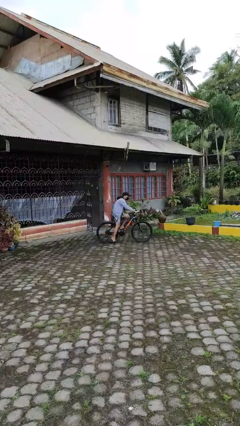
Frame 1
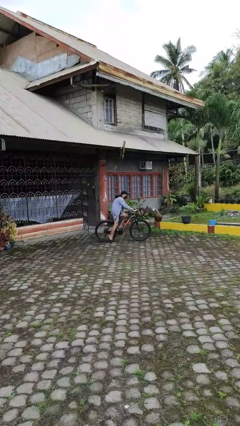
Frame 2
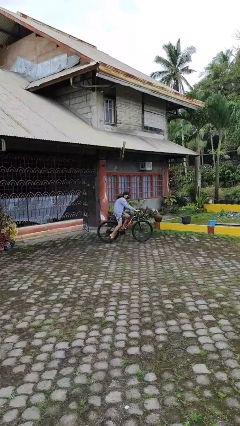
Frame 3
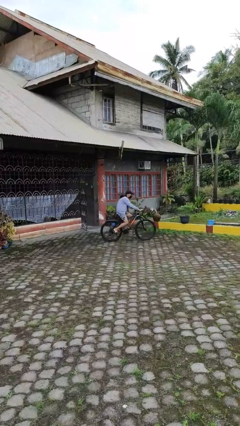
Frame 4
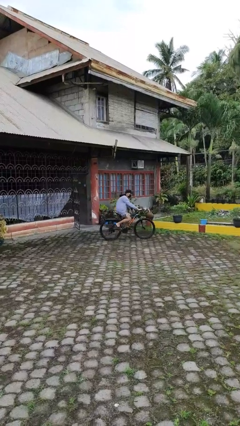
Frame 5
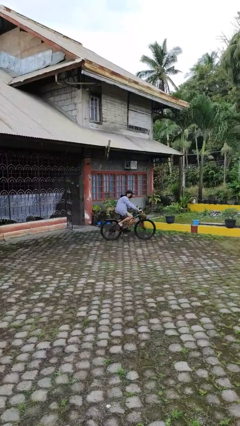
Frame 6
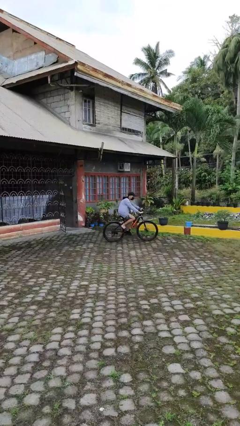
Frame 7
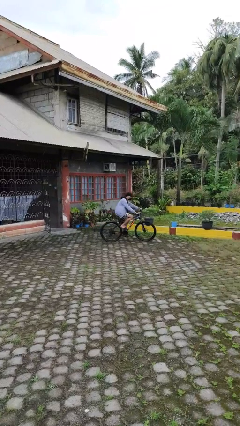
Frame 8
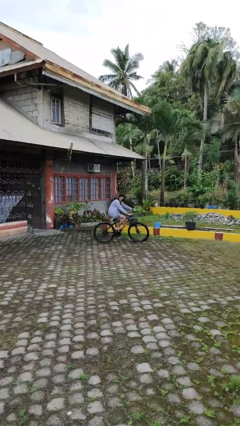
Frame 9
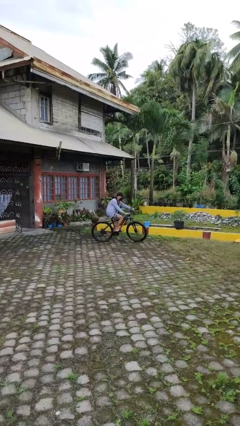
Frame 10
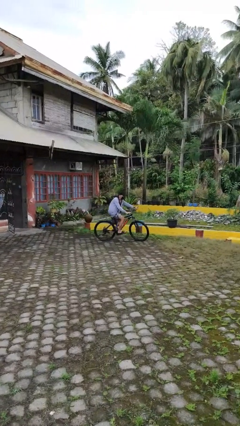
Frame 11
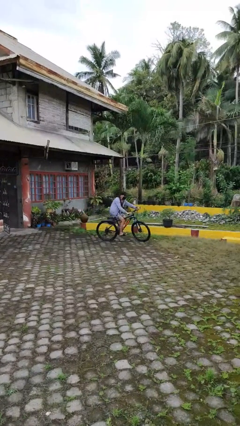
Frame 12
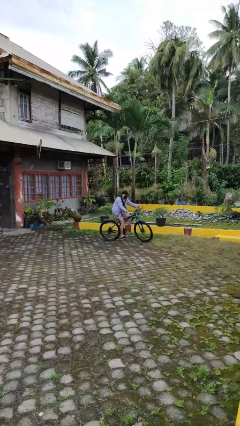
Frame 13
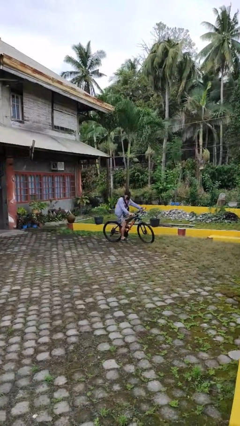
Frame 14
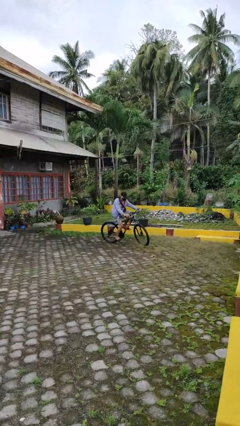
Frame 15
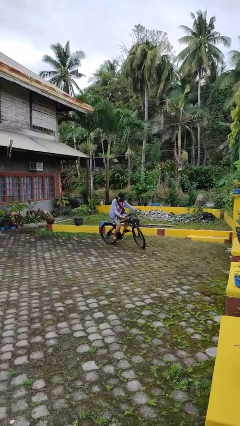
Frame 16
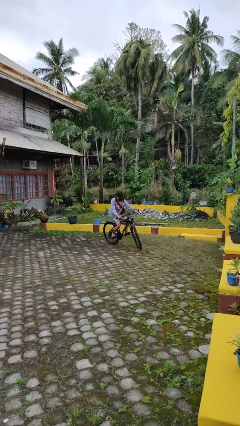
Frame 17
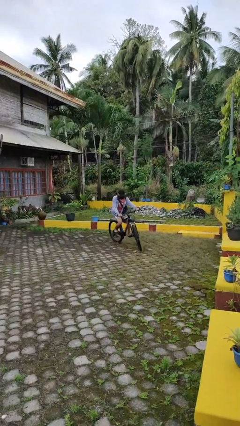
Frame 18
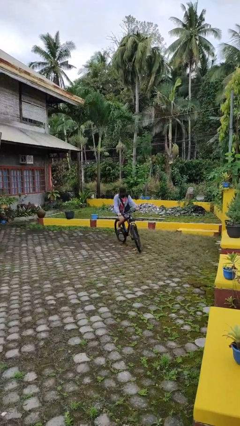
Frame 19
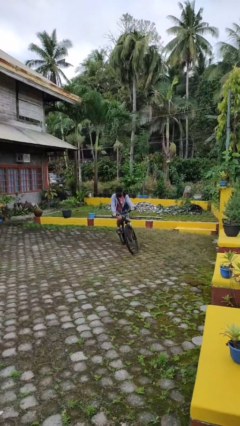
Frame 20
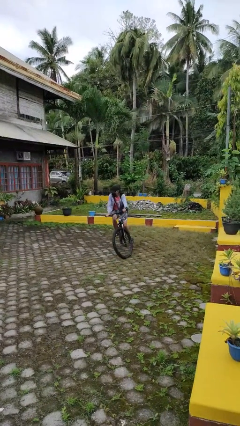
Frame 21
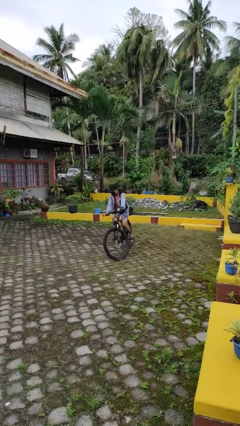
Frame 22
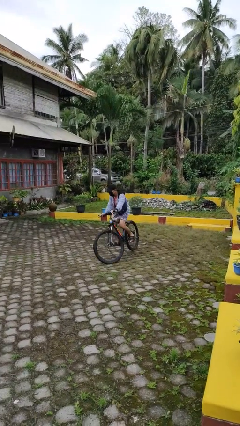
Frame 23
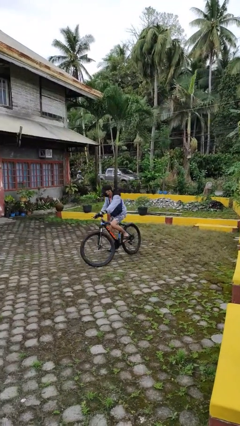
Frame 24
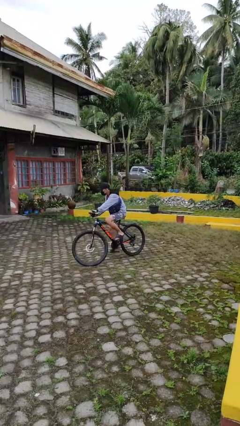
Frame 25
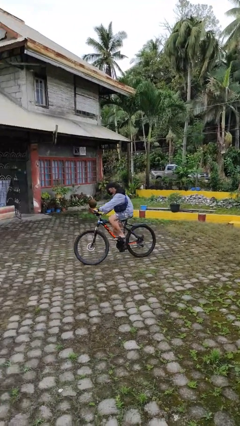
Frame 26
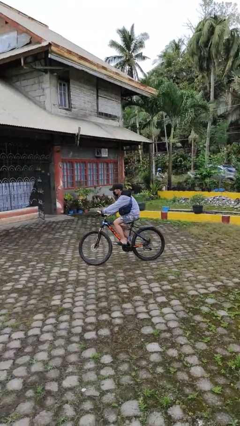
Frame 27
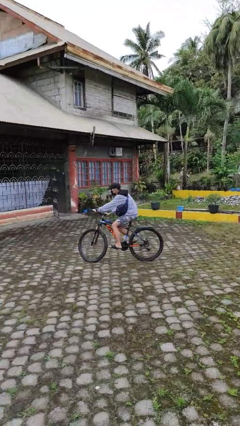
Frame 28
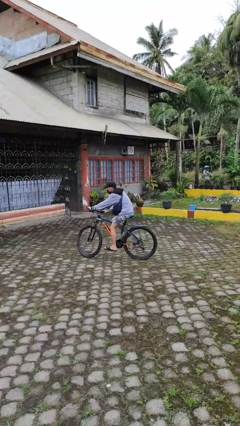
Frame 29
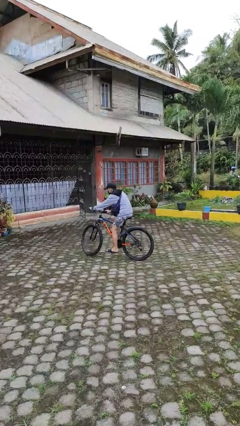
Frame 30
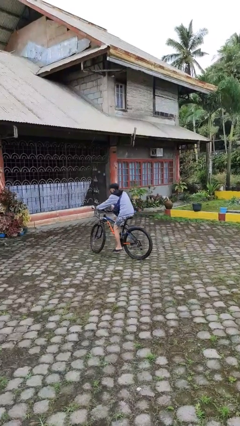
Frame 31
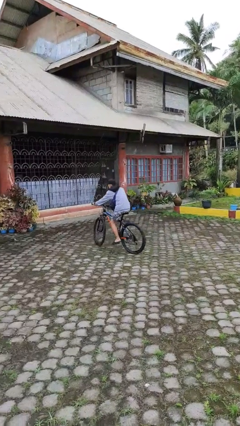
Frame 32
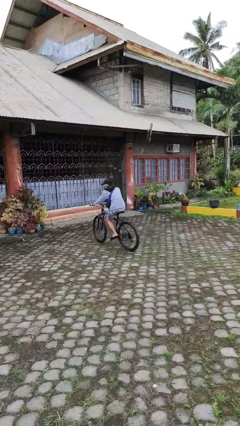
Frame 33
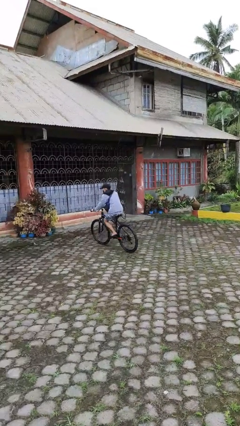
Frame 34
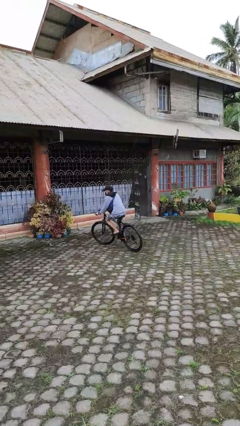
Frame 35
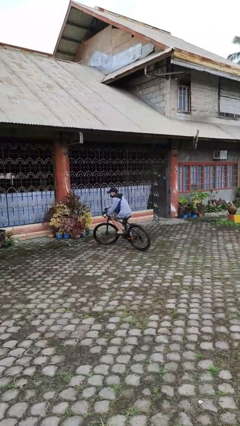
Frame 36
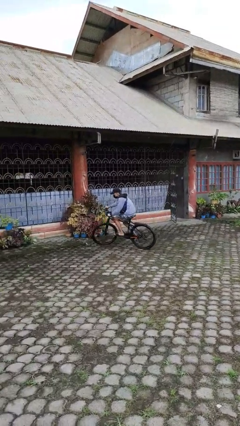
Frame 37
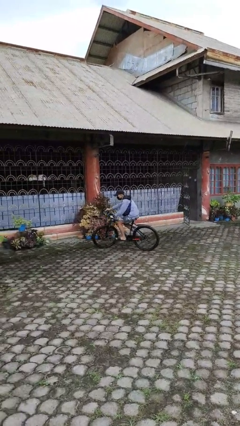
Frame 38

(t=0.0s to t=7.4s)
person rides bicycle

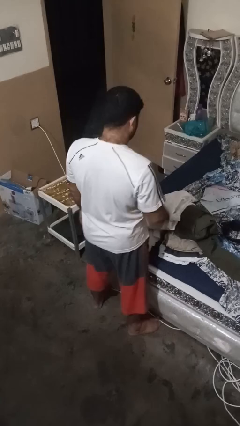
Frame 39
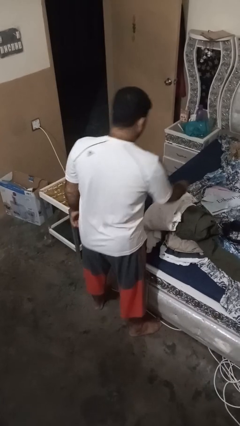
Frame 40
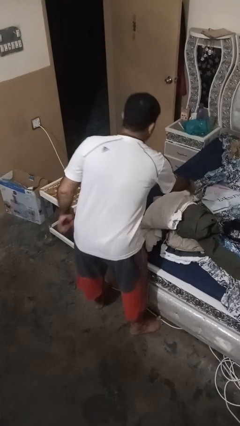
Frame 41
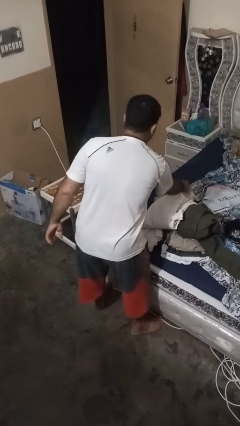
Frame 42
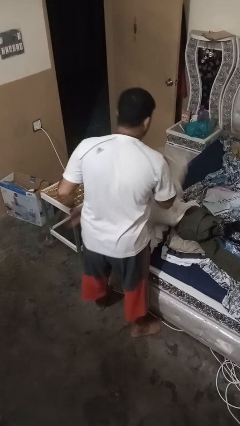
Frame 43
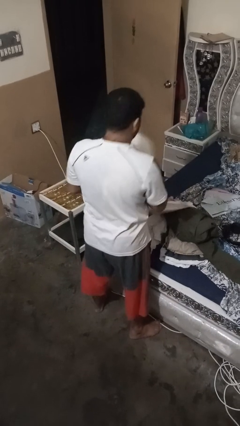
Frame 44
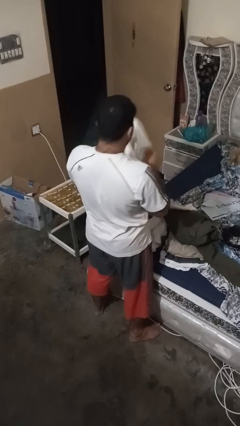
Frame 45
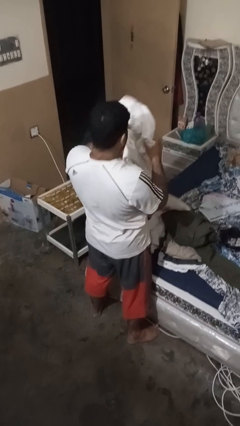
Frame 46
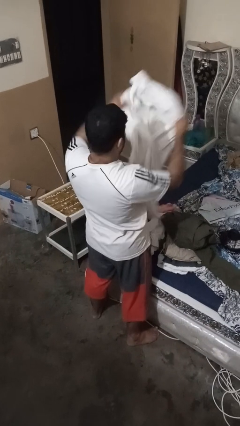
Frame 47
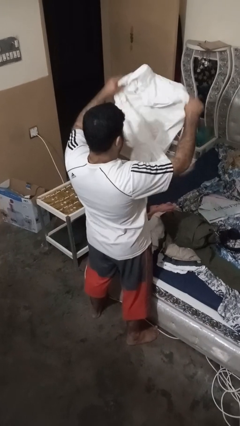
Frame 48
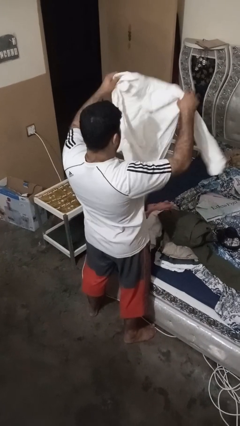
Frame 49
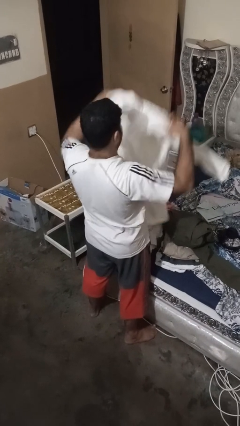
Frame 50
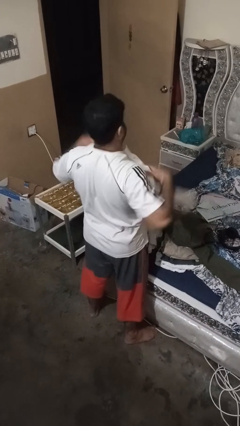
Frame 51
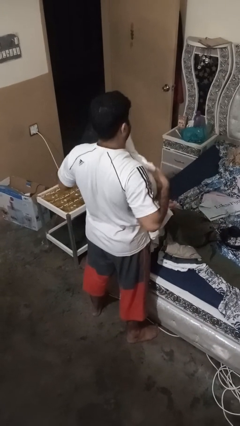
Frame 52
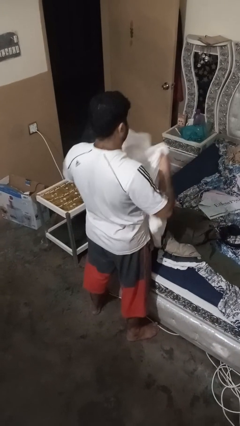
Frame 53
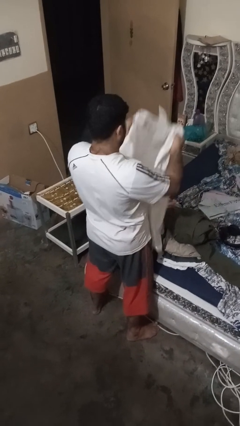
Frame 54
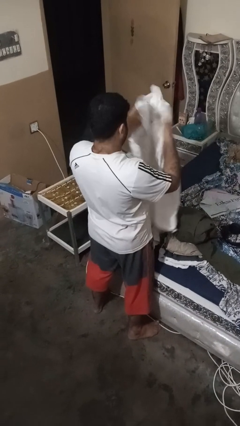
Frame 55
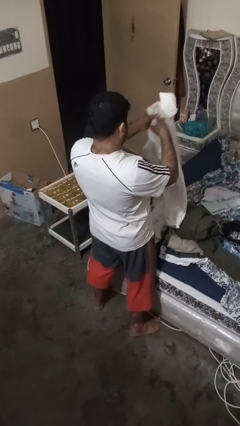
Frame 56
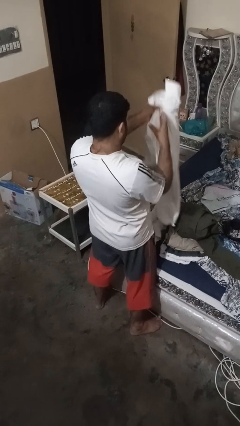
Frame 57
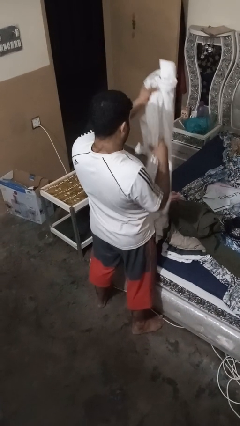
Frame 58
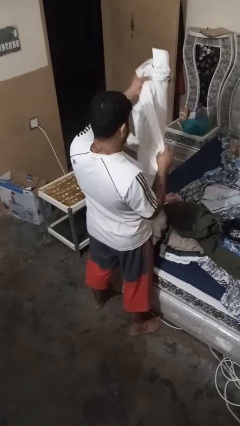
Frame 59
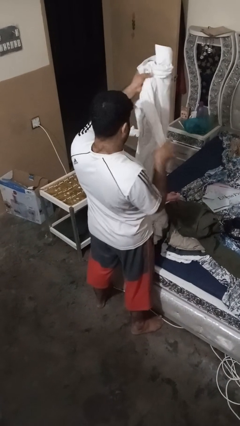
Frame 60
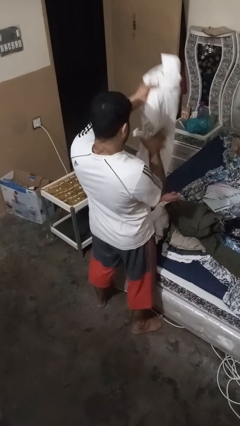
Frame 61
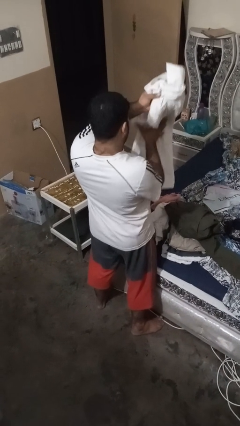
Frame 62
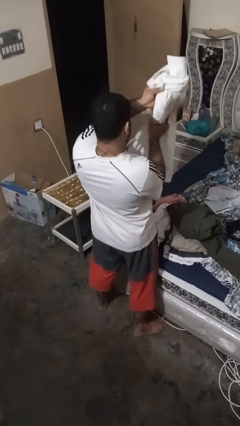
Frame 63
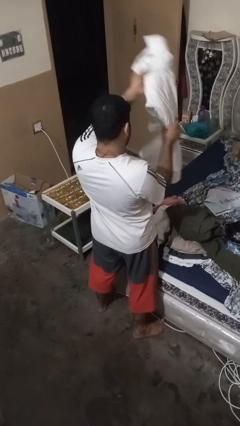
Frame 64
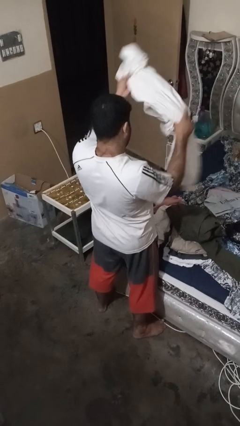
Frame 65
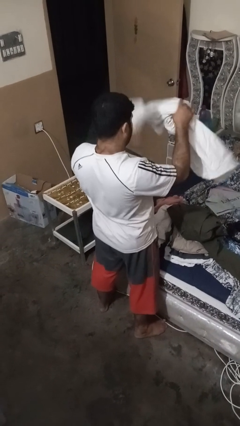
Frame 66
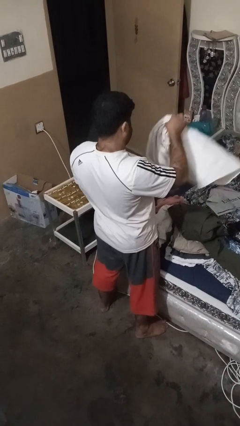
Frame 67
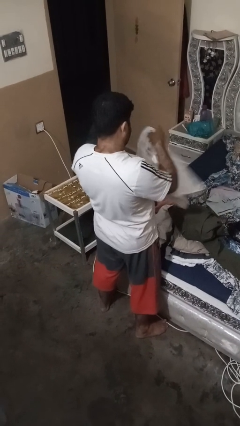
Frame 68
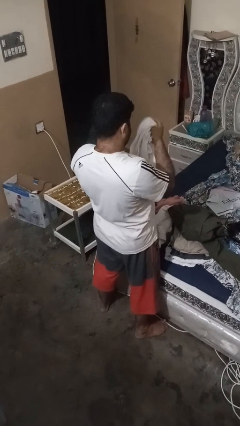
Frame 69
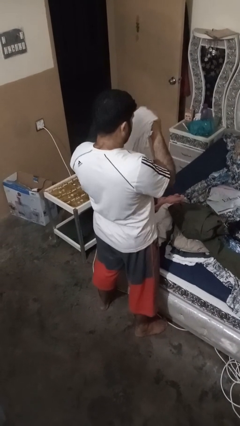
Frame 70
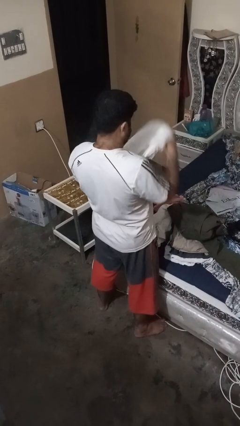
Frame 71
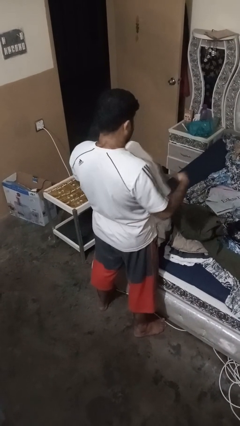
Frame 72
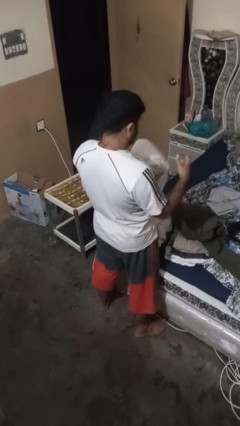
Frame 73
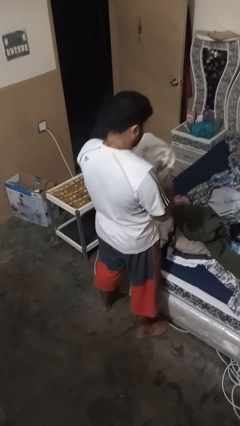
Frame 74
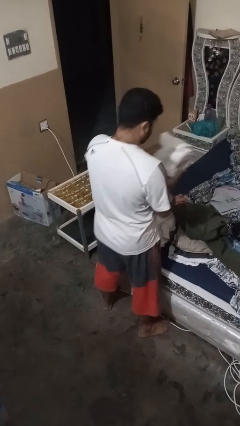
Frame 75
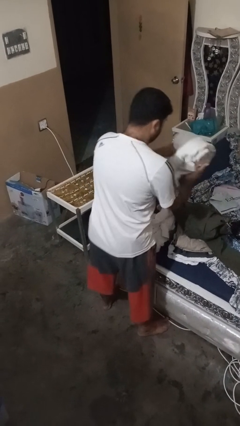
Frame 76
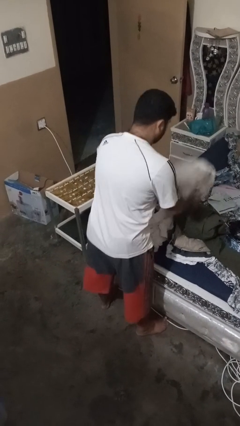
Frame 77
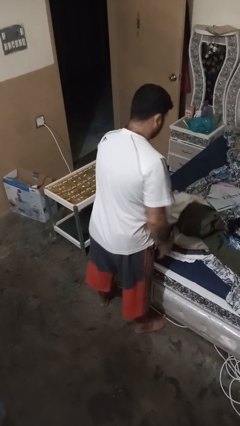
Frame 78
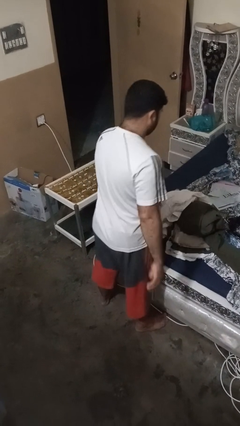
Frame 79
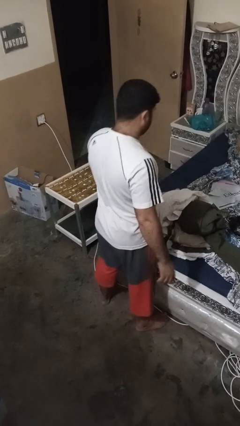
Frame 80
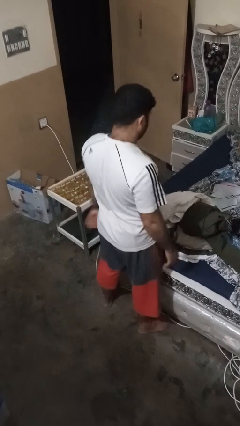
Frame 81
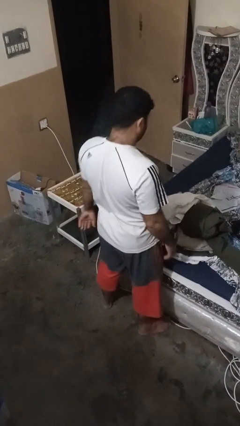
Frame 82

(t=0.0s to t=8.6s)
person folds shirt

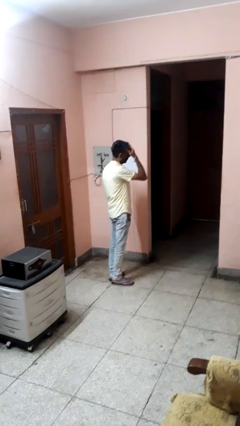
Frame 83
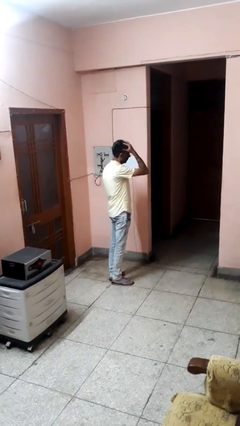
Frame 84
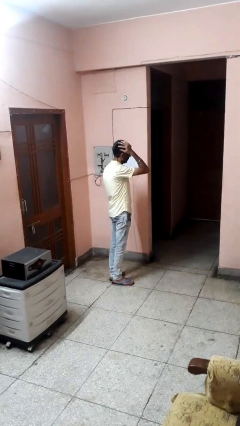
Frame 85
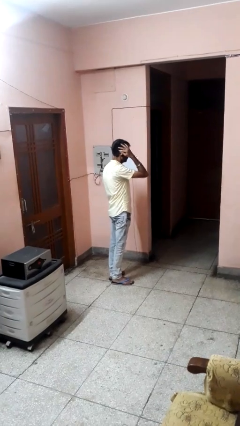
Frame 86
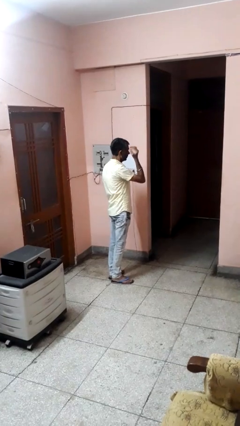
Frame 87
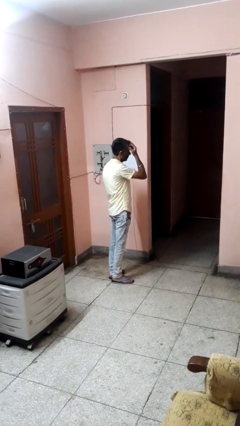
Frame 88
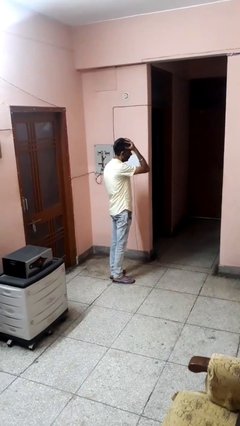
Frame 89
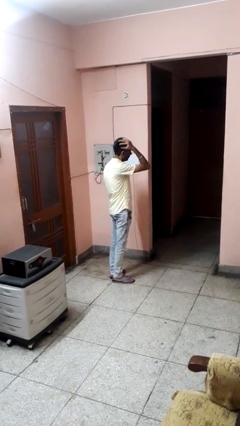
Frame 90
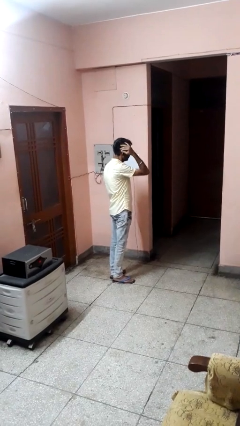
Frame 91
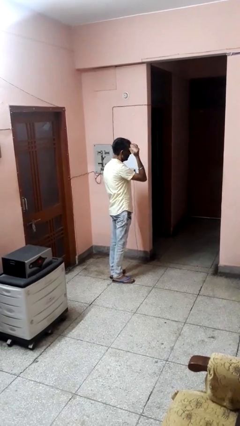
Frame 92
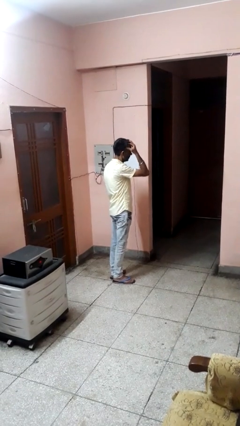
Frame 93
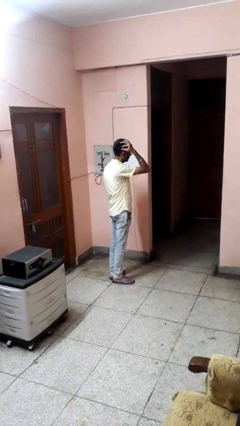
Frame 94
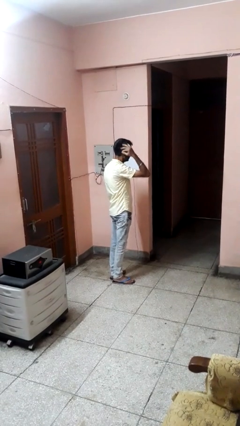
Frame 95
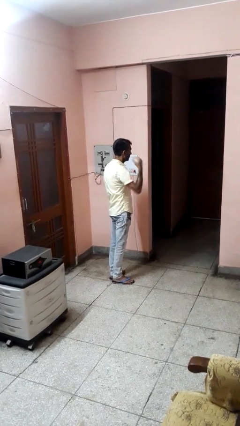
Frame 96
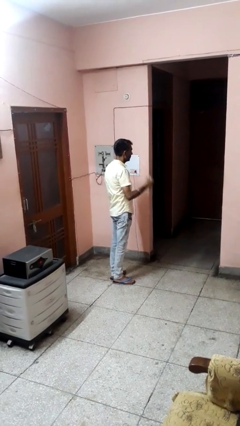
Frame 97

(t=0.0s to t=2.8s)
person strokes hair
